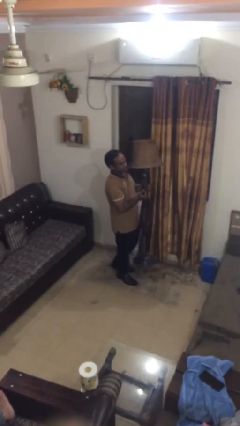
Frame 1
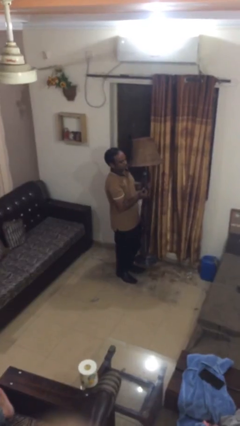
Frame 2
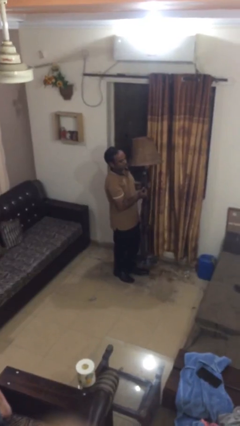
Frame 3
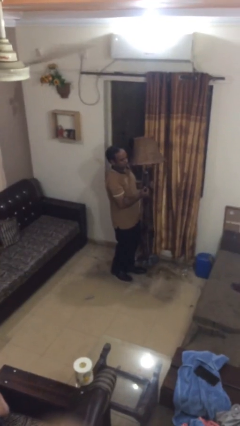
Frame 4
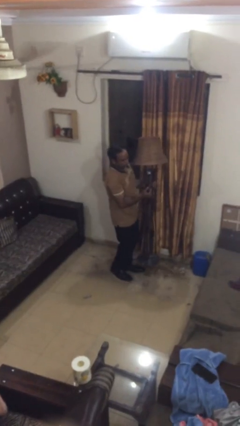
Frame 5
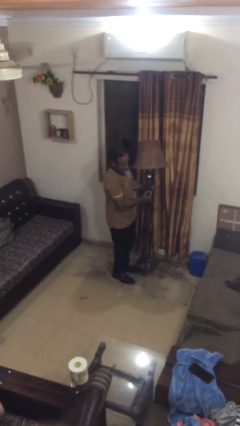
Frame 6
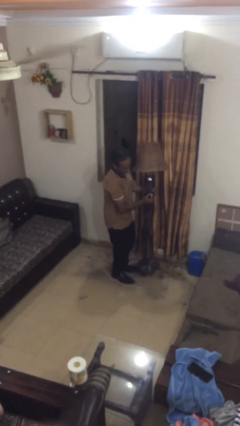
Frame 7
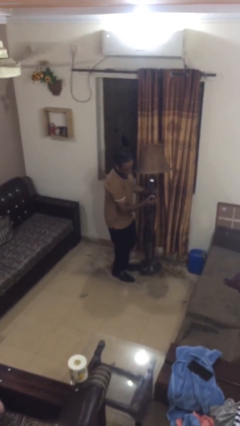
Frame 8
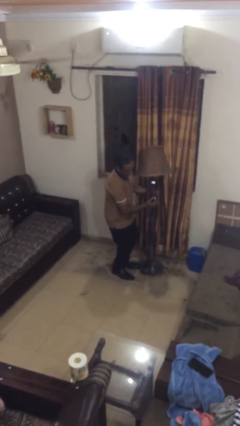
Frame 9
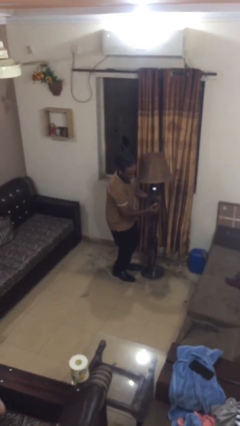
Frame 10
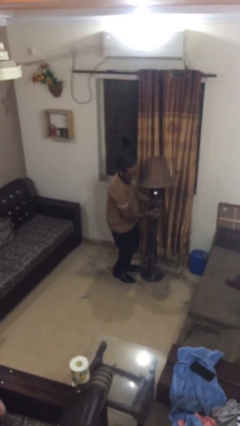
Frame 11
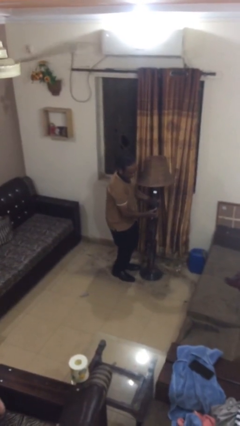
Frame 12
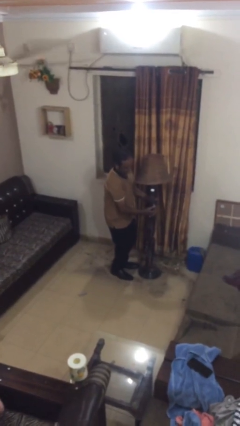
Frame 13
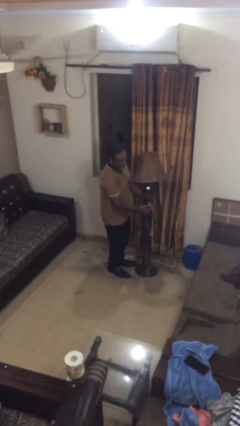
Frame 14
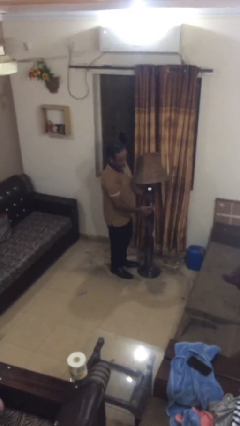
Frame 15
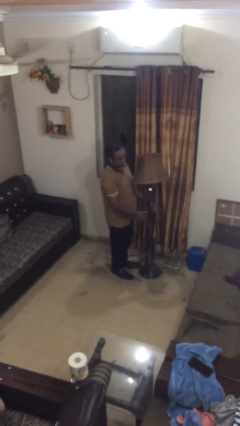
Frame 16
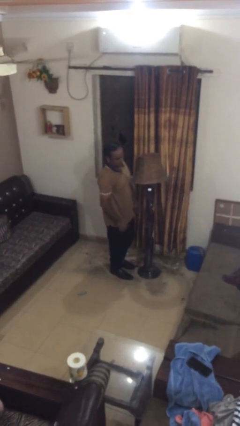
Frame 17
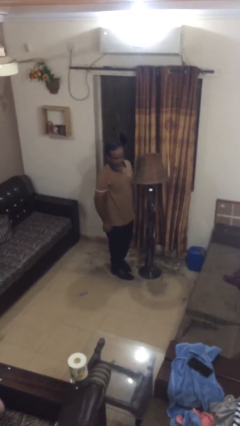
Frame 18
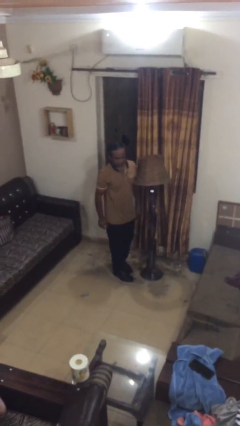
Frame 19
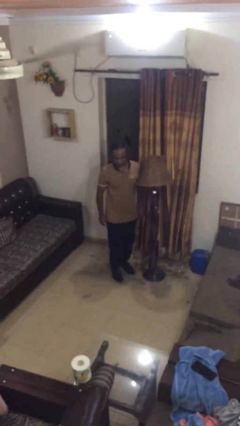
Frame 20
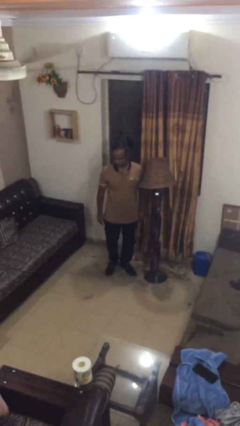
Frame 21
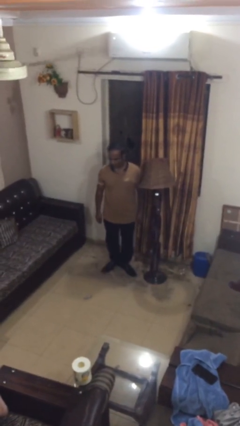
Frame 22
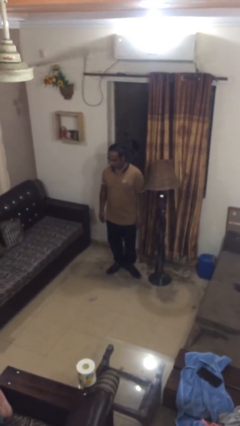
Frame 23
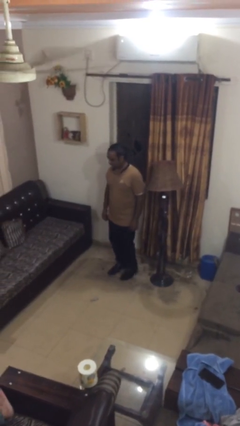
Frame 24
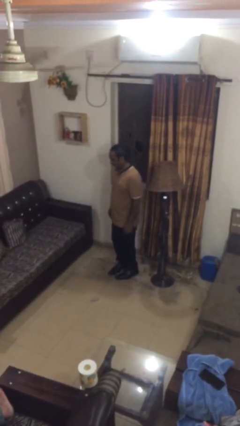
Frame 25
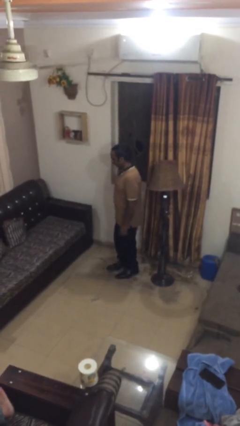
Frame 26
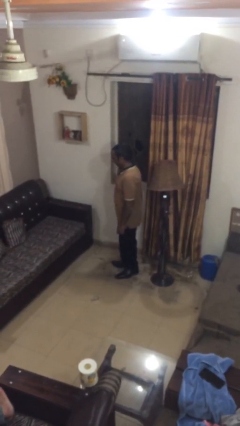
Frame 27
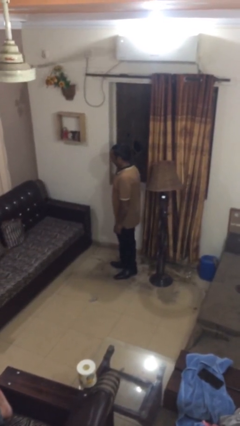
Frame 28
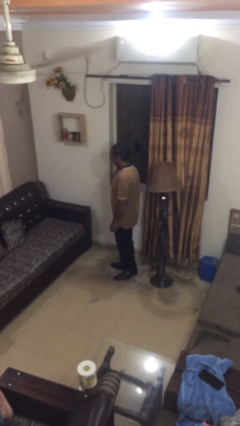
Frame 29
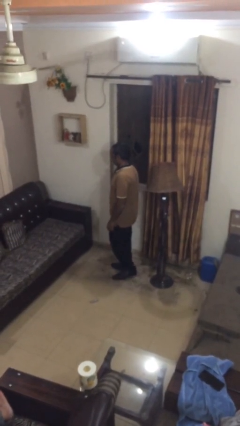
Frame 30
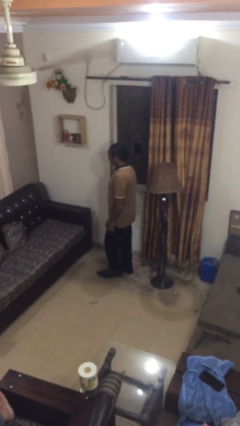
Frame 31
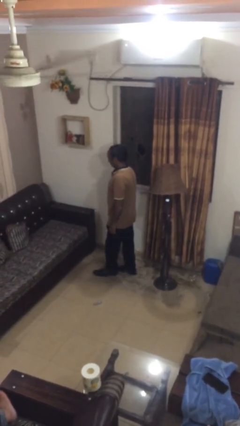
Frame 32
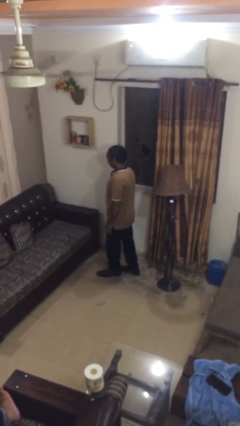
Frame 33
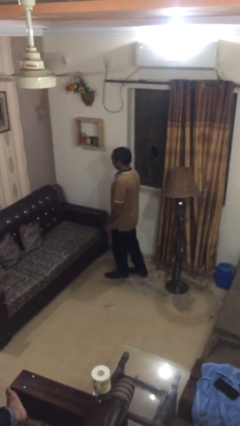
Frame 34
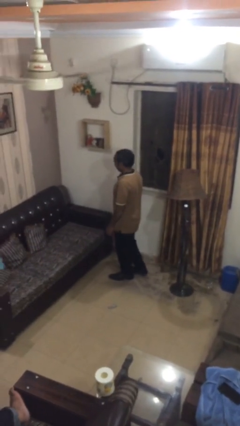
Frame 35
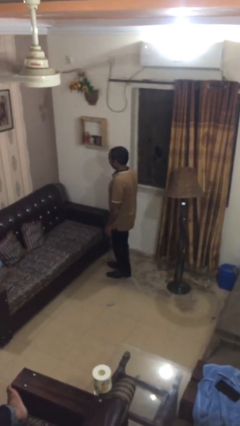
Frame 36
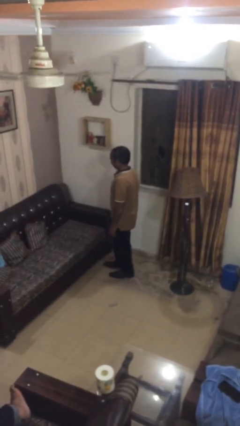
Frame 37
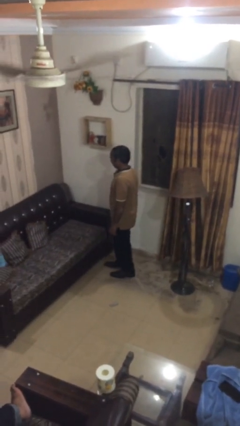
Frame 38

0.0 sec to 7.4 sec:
person puts down object on floor

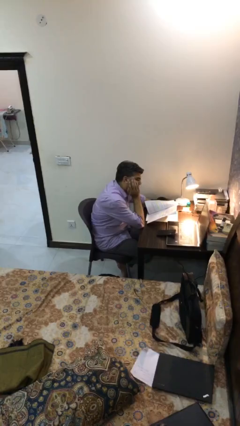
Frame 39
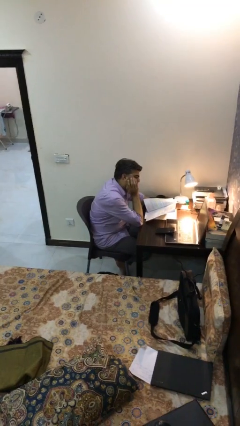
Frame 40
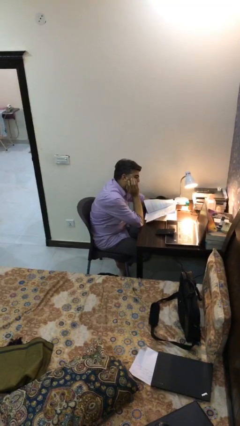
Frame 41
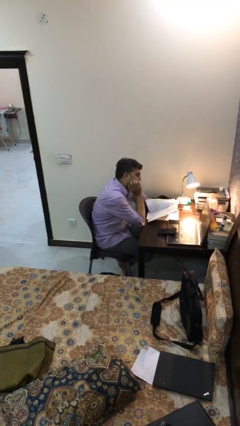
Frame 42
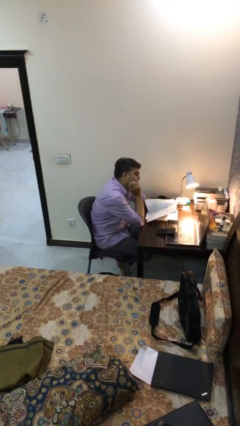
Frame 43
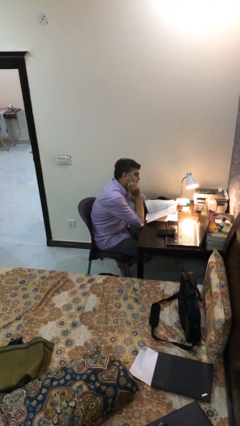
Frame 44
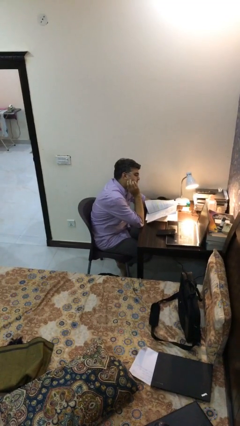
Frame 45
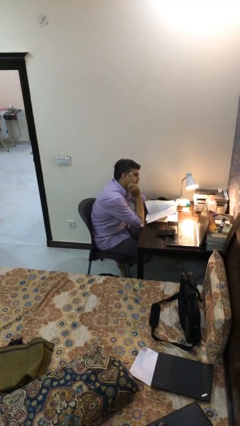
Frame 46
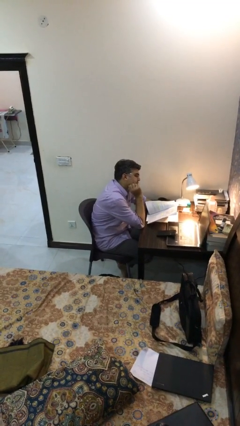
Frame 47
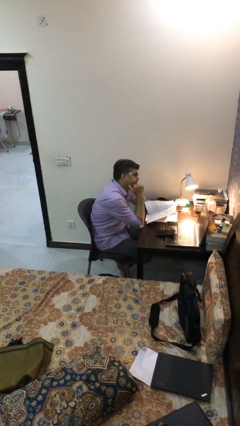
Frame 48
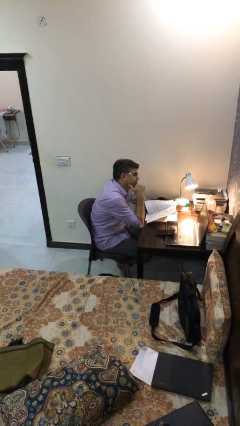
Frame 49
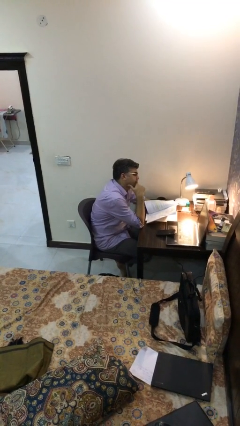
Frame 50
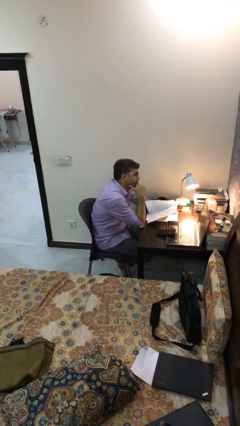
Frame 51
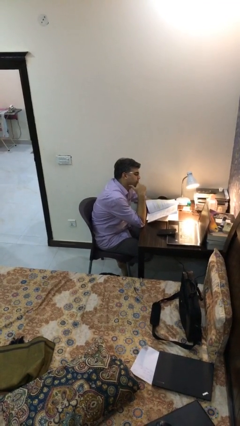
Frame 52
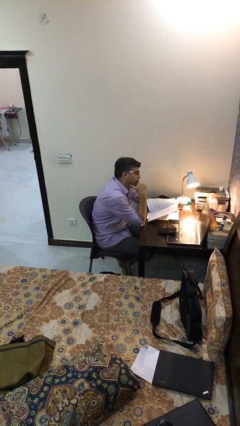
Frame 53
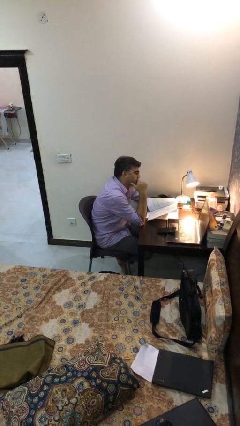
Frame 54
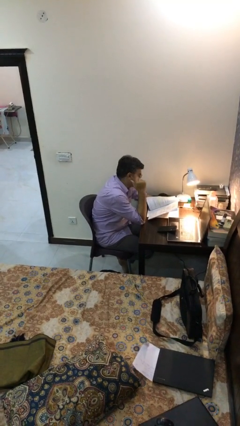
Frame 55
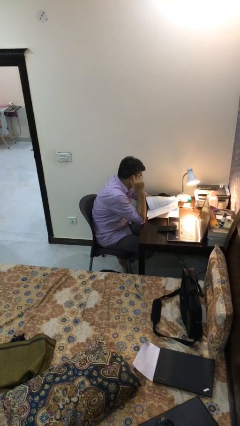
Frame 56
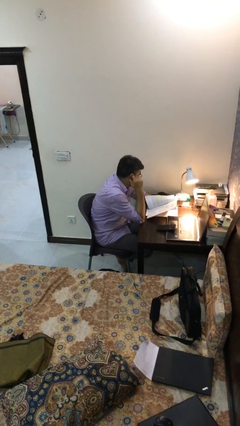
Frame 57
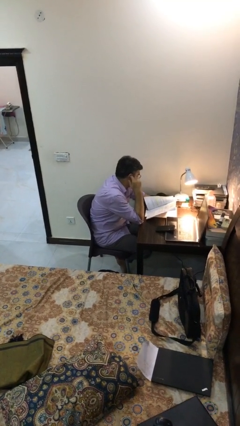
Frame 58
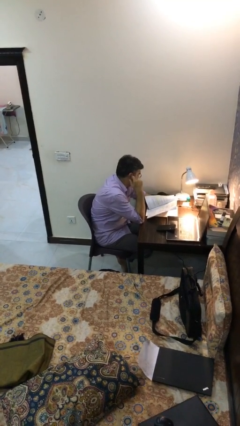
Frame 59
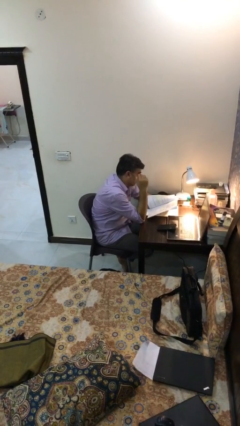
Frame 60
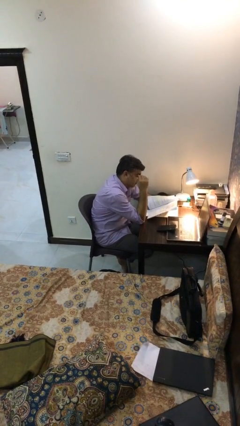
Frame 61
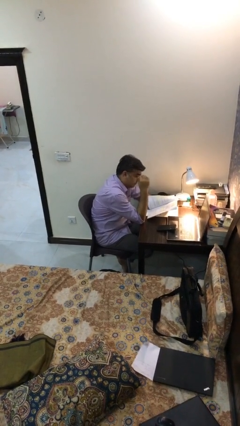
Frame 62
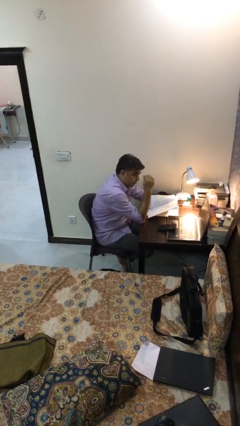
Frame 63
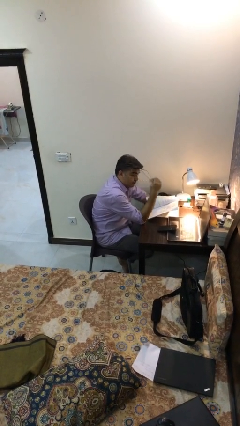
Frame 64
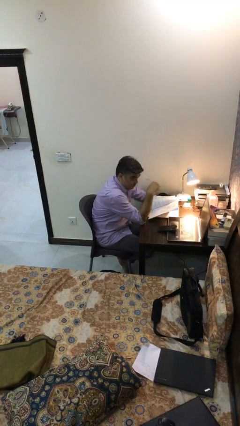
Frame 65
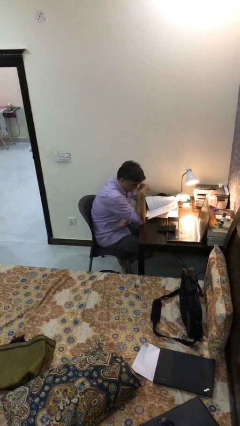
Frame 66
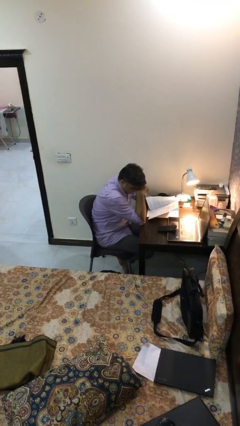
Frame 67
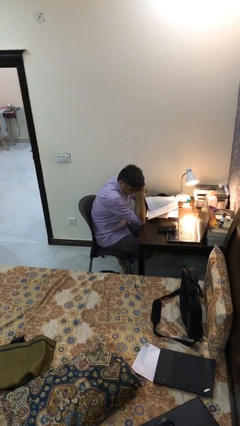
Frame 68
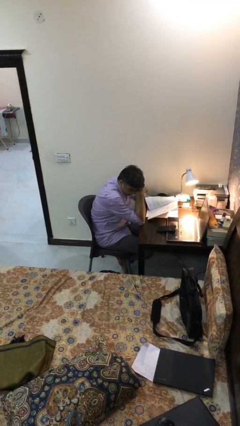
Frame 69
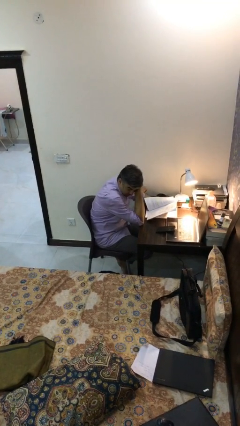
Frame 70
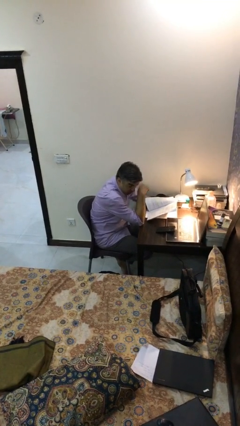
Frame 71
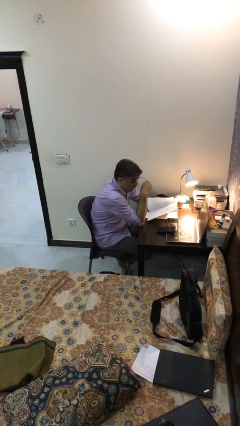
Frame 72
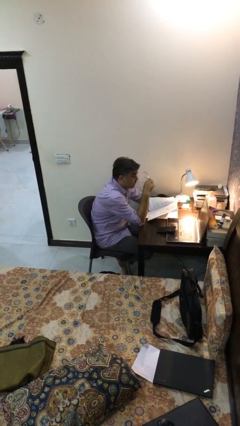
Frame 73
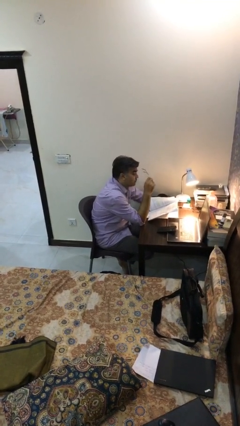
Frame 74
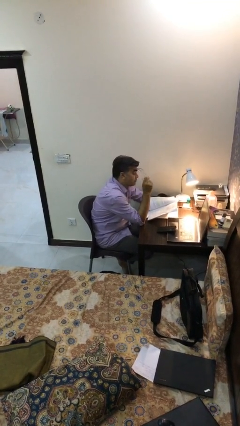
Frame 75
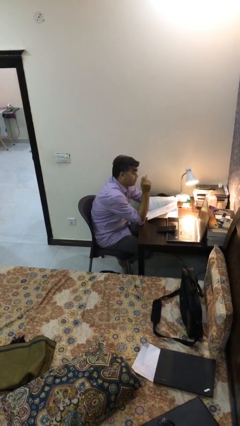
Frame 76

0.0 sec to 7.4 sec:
person reads document

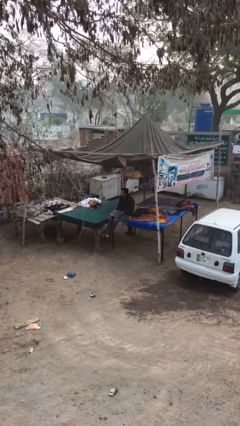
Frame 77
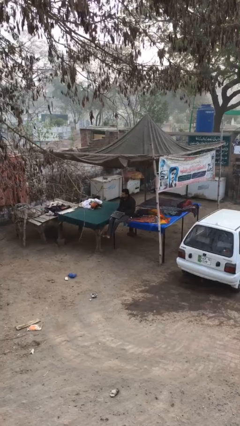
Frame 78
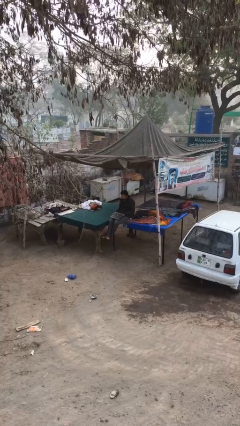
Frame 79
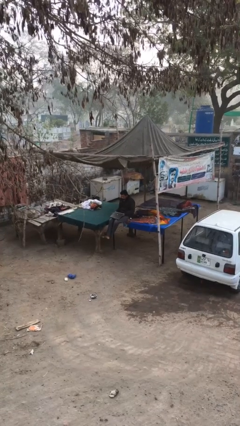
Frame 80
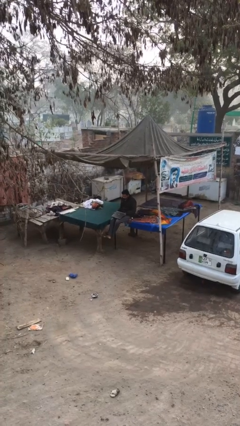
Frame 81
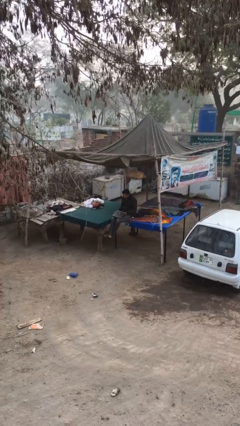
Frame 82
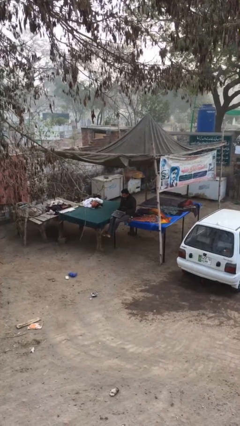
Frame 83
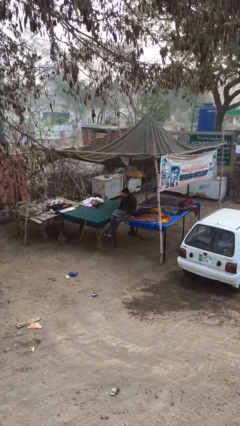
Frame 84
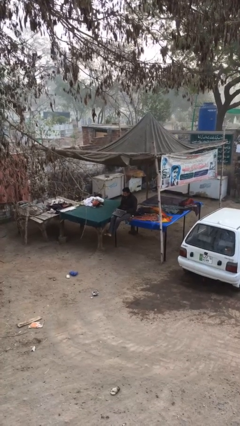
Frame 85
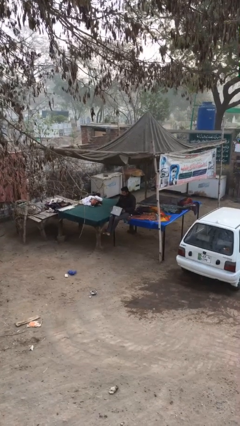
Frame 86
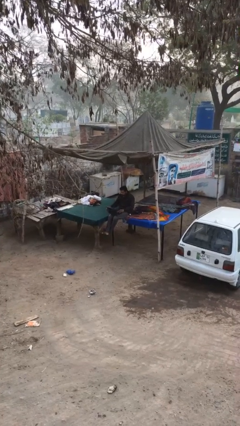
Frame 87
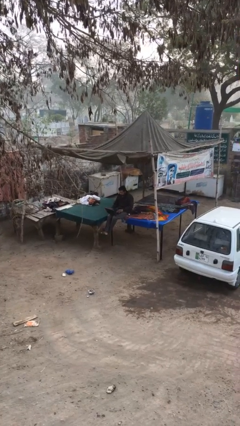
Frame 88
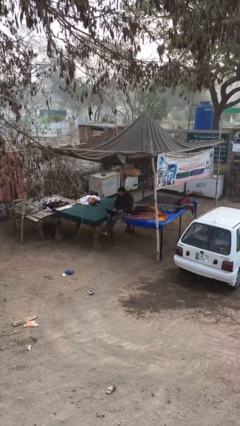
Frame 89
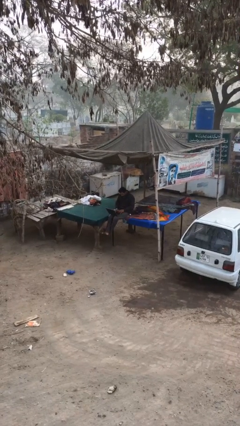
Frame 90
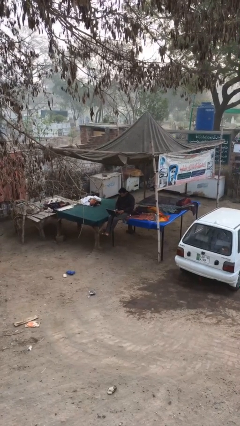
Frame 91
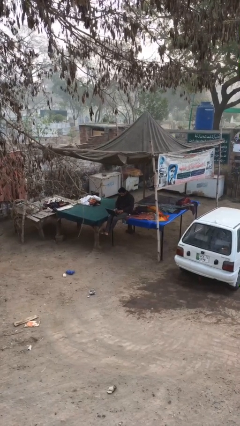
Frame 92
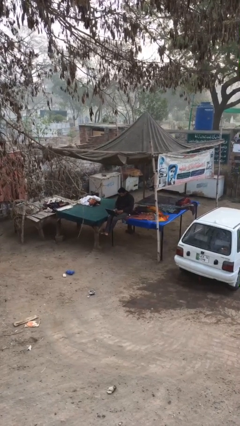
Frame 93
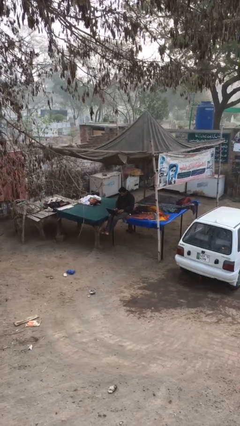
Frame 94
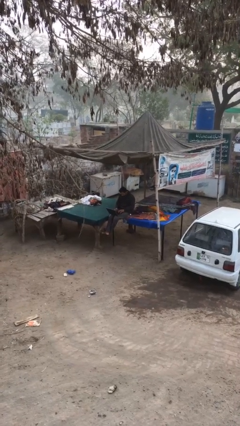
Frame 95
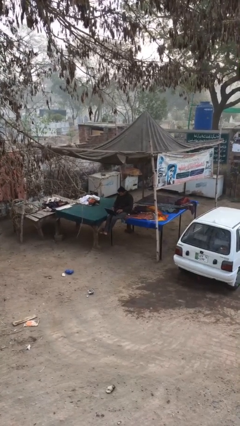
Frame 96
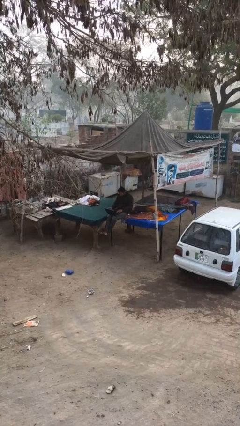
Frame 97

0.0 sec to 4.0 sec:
person interacts with laptop
